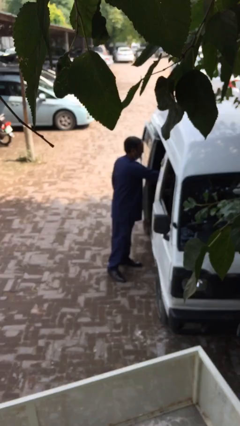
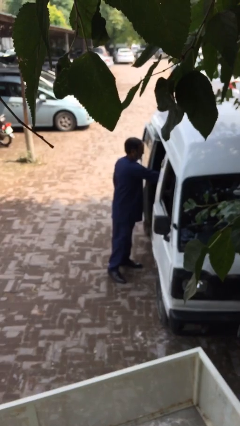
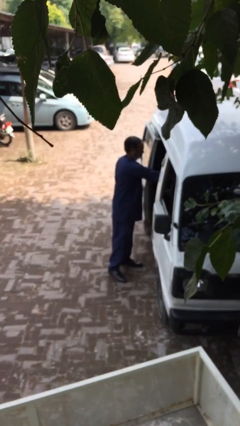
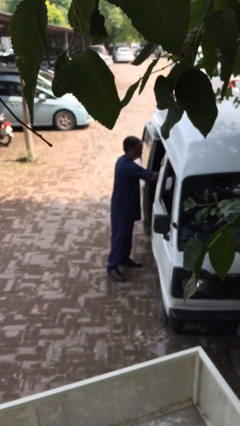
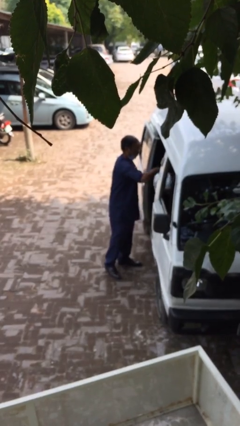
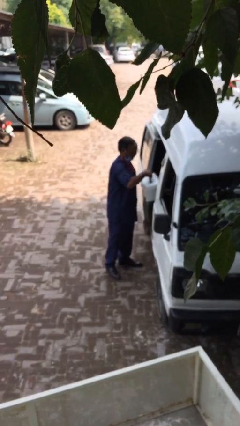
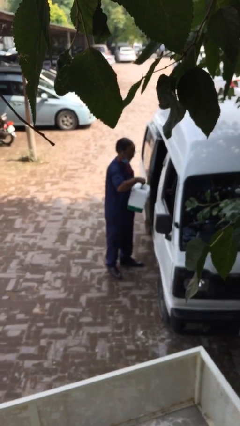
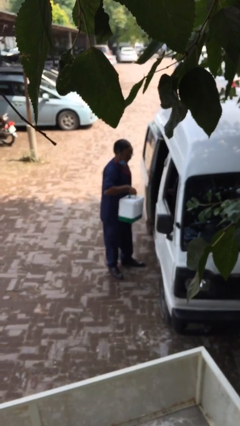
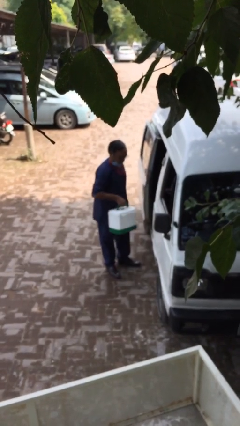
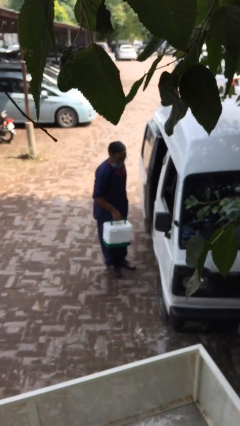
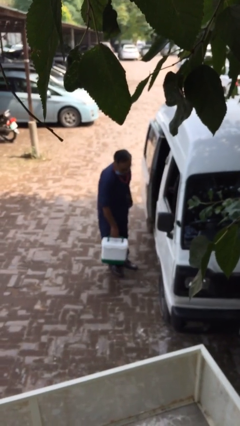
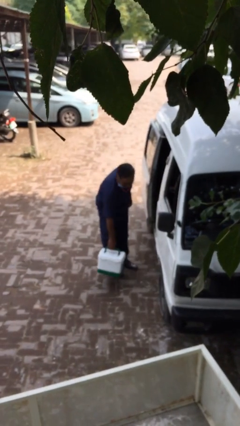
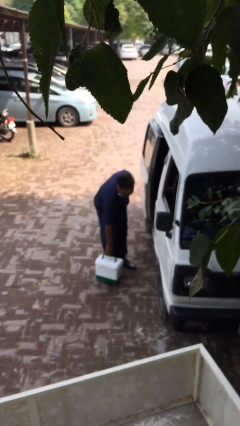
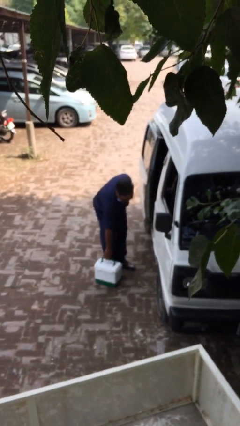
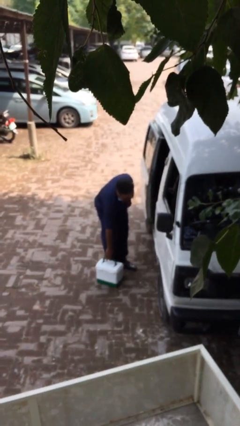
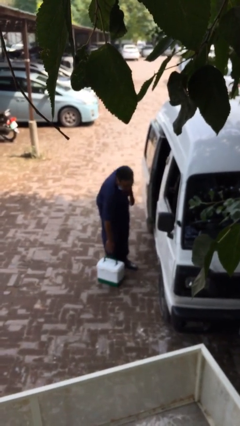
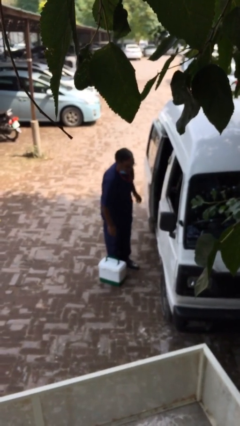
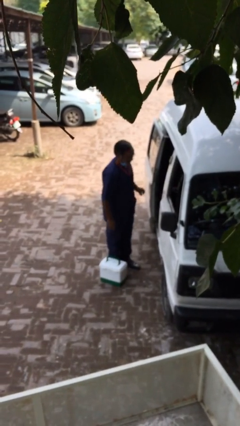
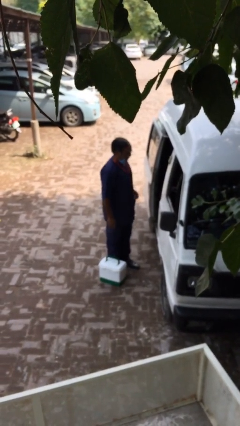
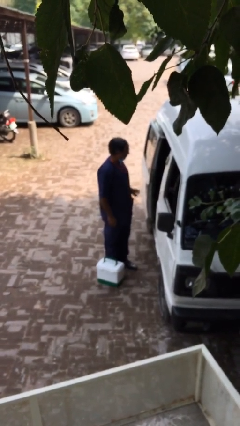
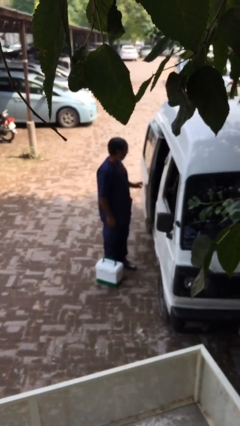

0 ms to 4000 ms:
person unloads car

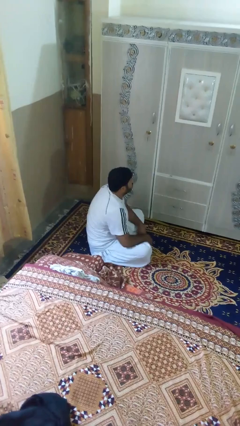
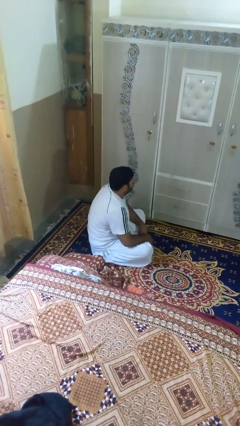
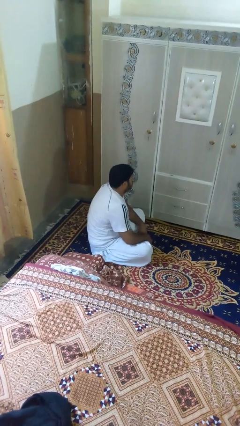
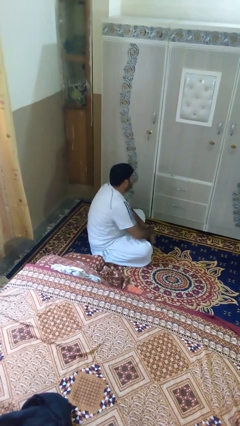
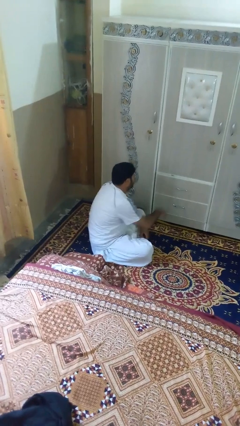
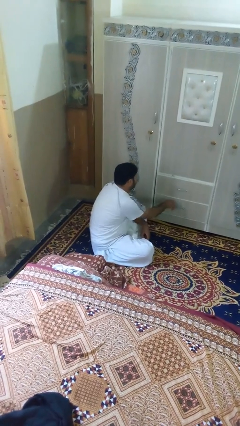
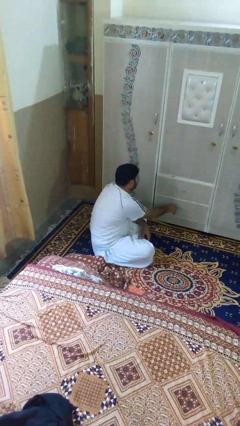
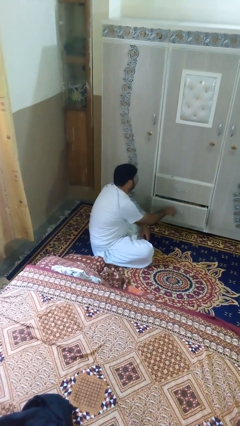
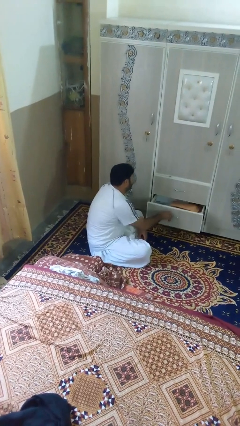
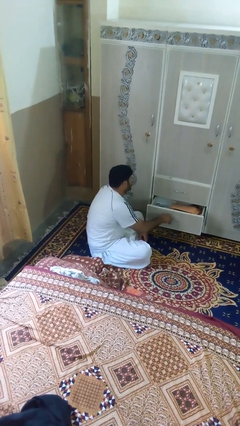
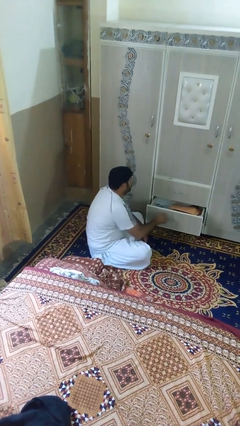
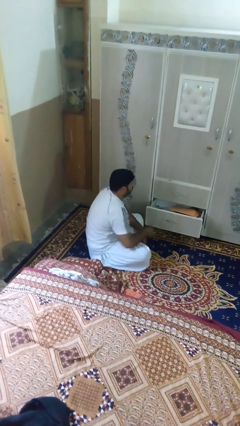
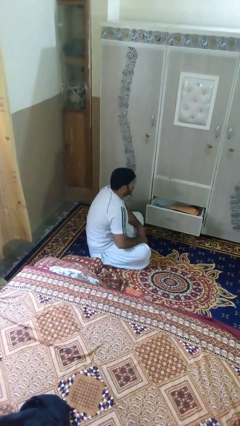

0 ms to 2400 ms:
person opens dresser drawer

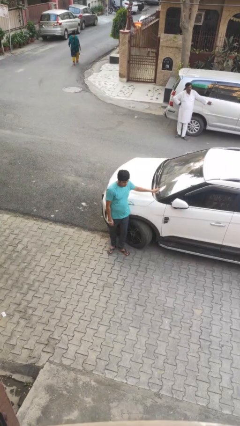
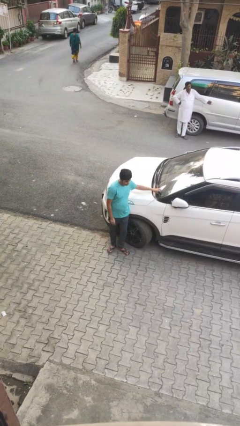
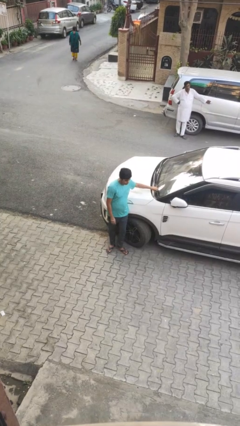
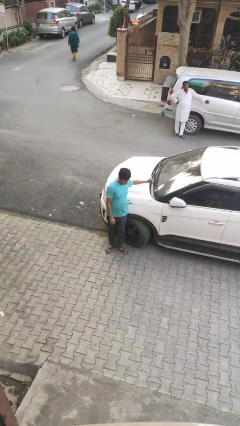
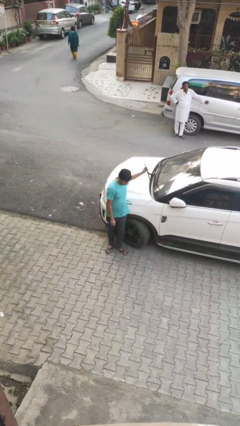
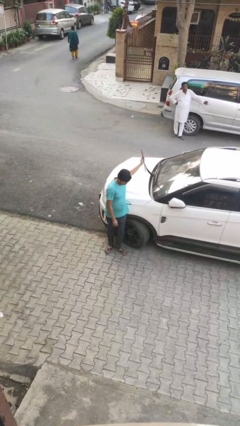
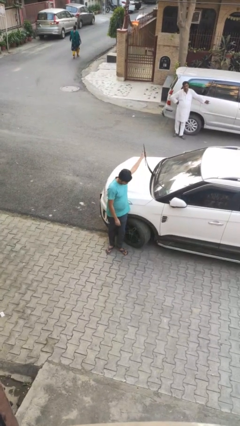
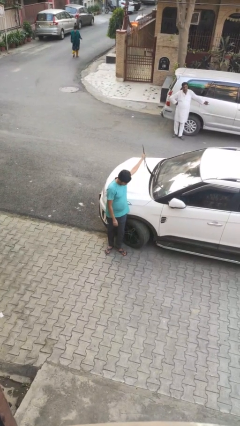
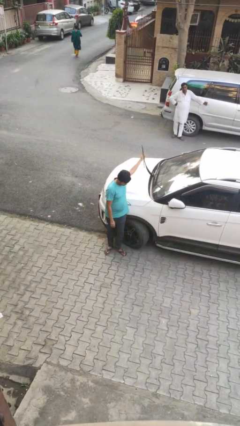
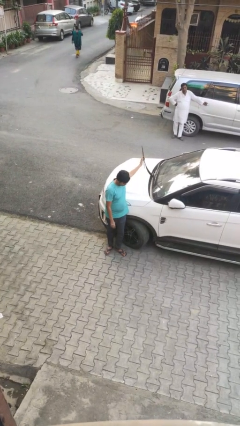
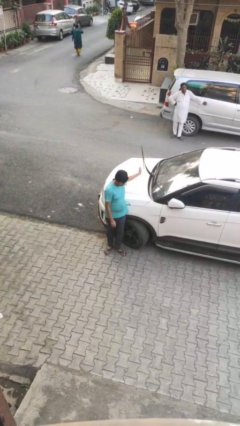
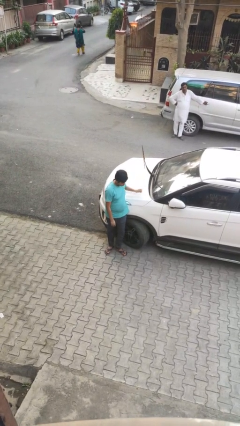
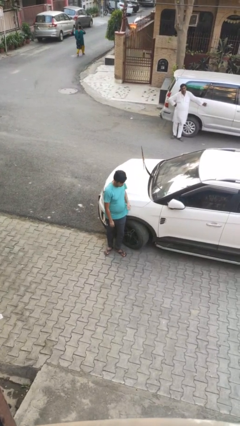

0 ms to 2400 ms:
person flips up car wipers

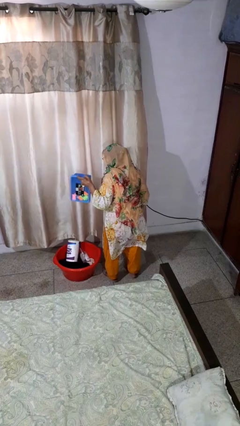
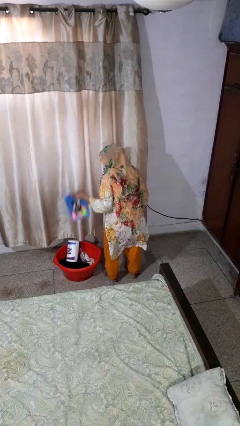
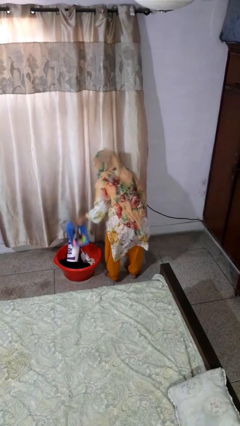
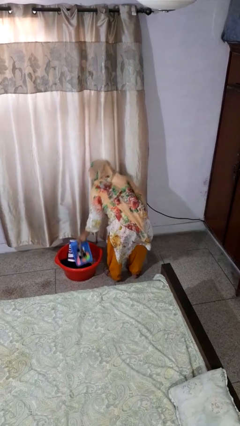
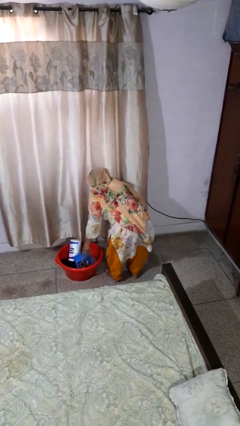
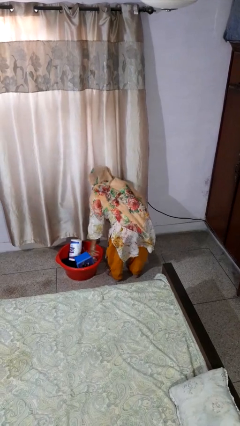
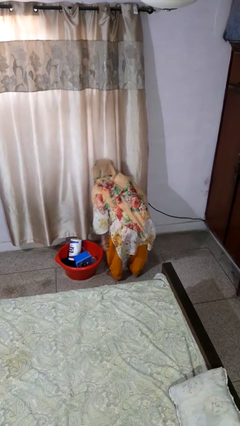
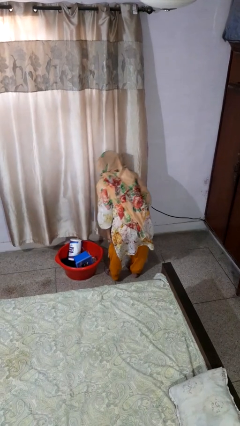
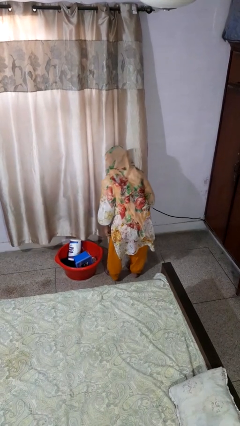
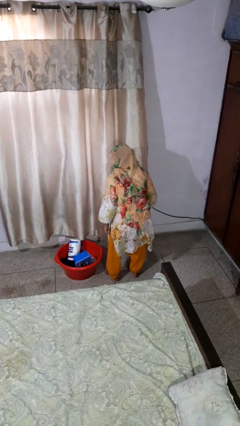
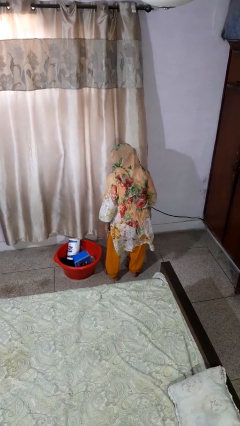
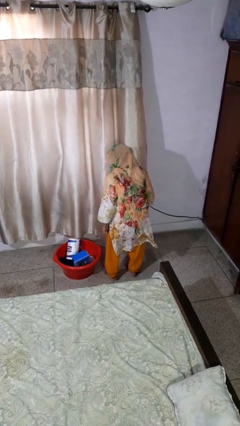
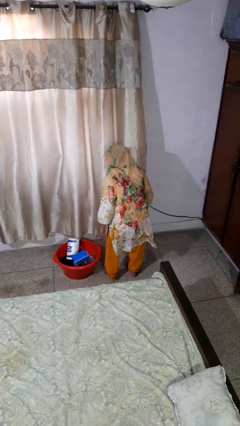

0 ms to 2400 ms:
person puts object into basket

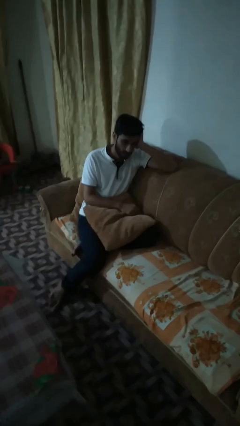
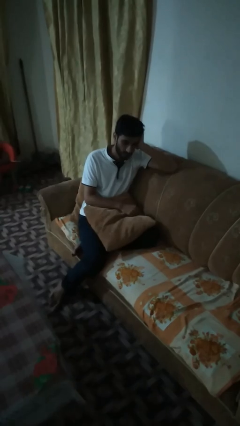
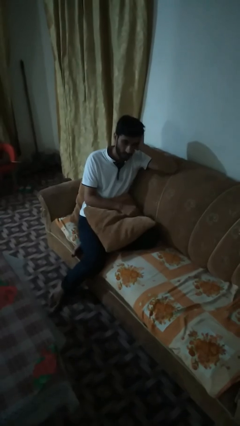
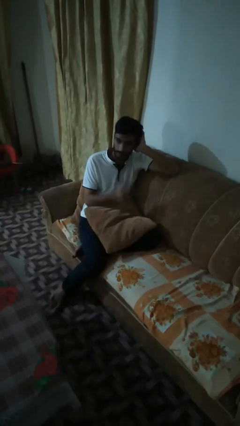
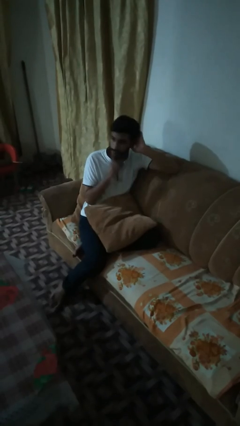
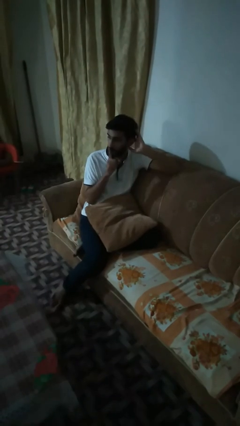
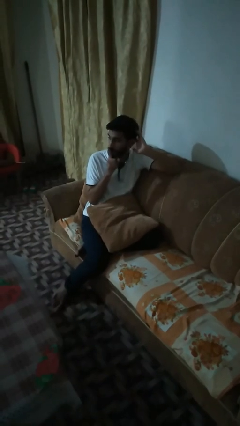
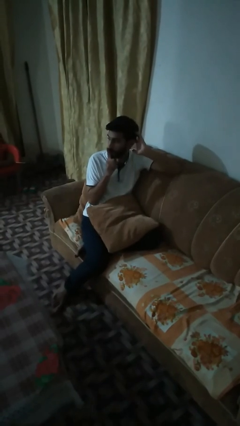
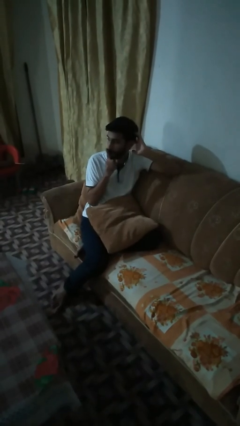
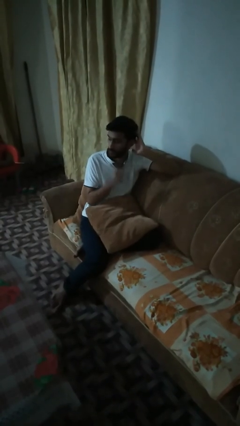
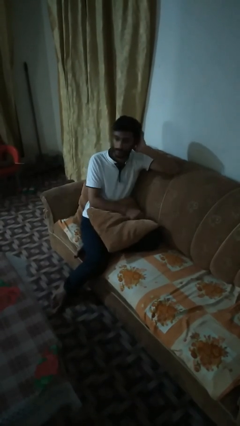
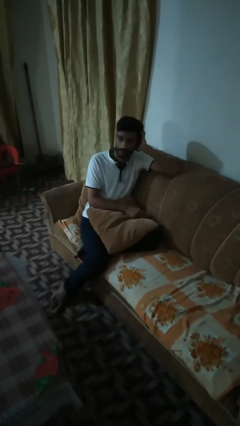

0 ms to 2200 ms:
person gestures be quiet

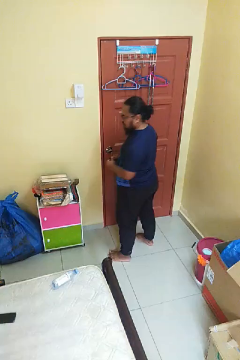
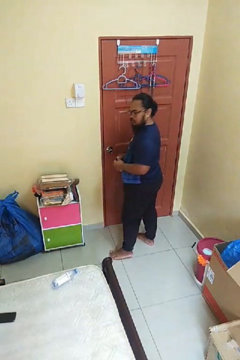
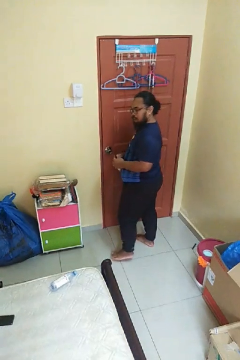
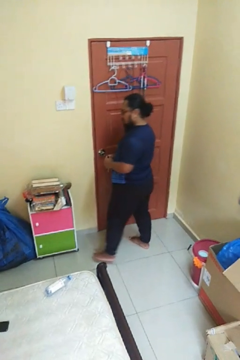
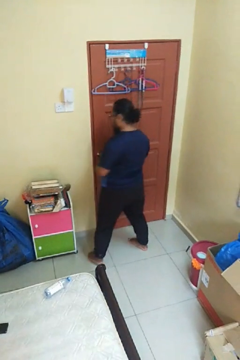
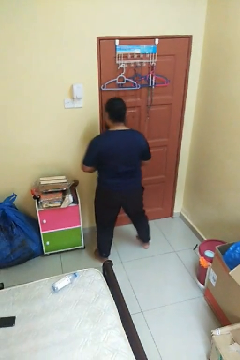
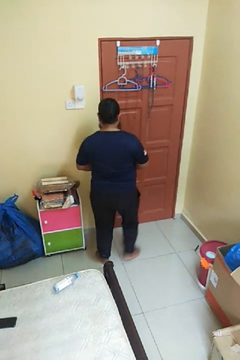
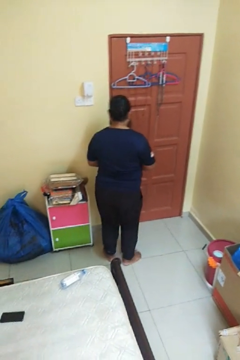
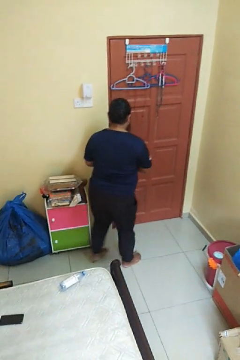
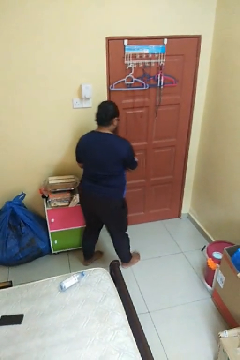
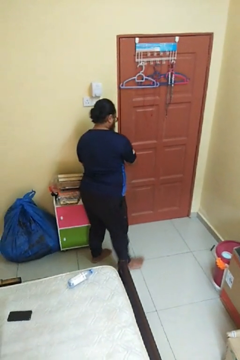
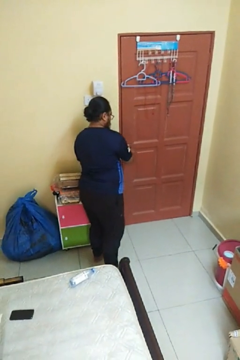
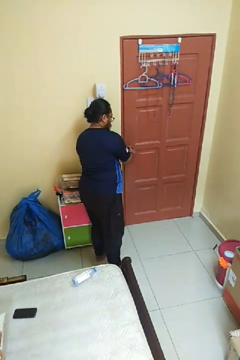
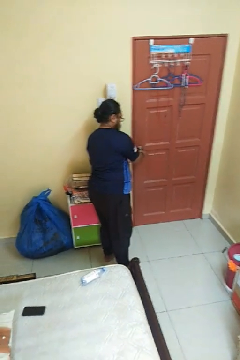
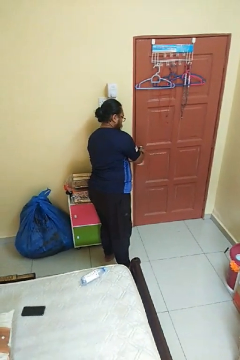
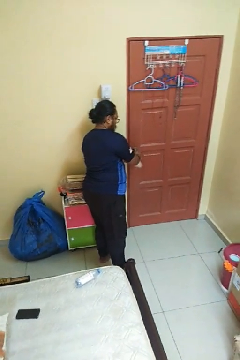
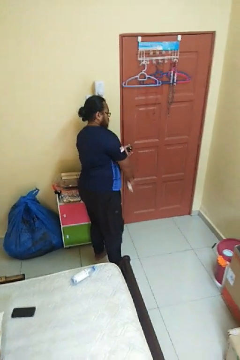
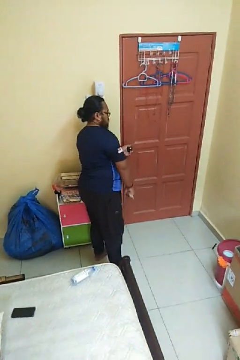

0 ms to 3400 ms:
person unlocks door with keys

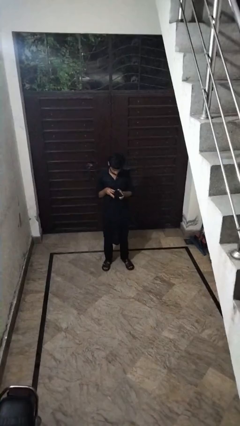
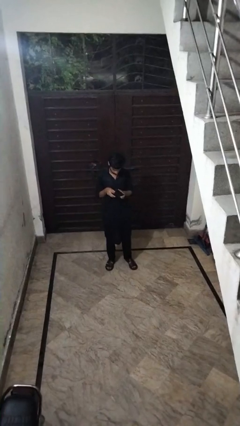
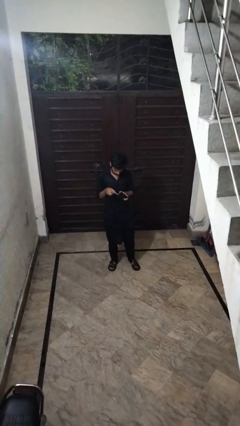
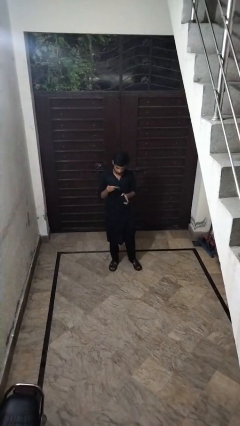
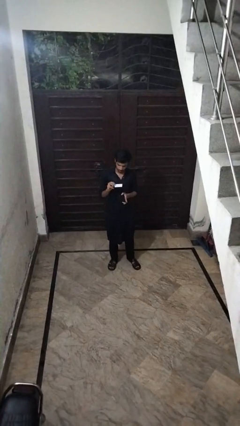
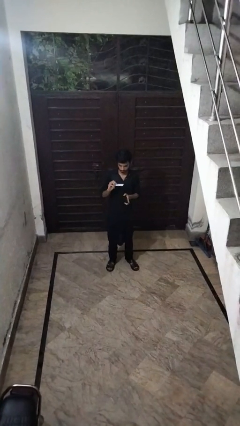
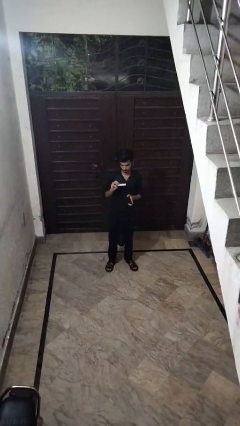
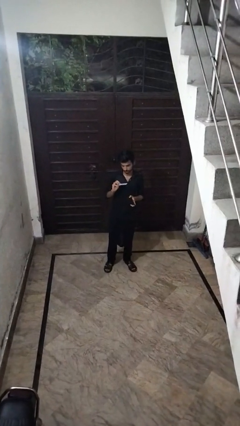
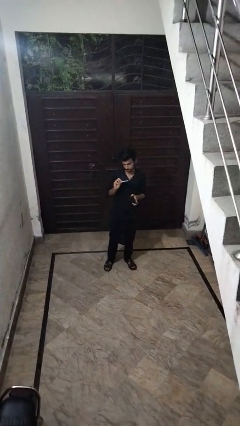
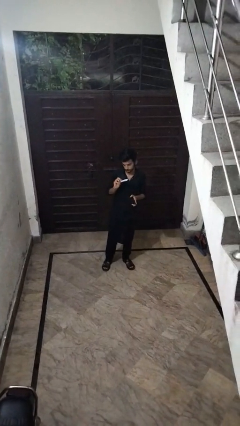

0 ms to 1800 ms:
person takes object from purse
